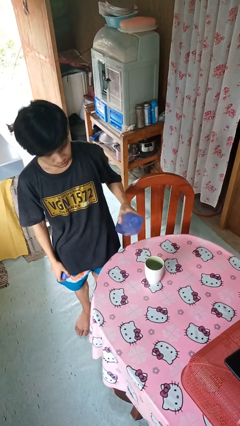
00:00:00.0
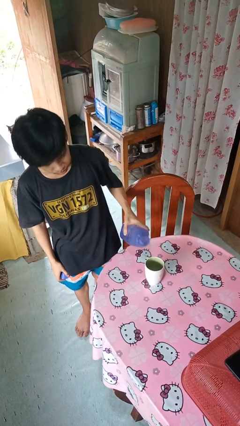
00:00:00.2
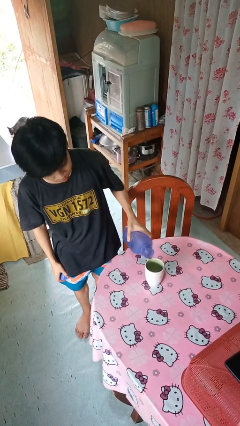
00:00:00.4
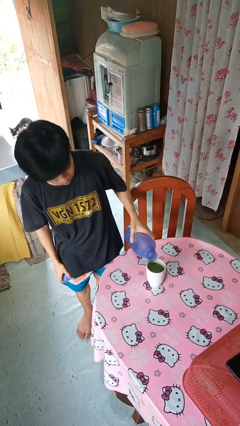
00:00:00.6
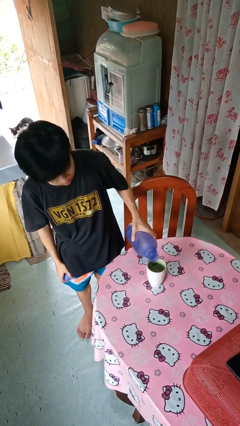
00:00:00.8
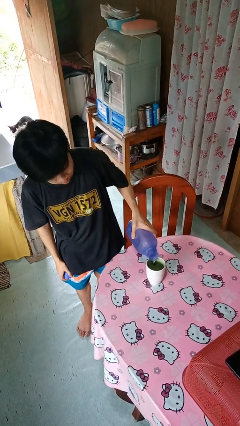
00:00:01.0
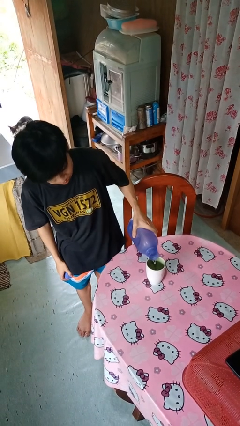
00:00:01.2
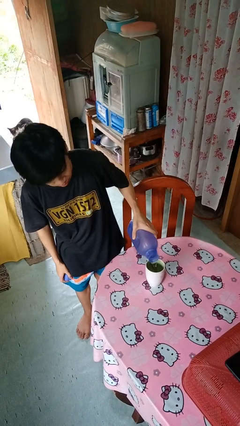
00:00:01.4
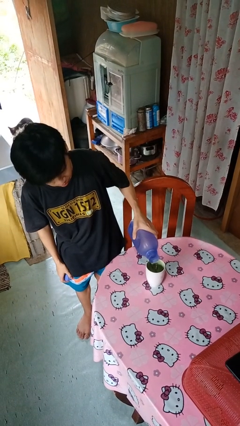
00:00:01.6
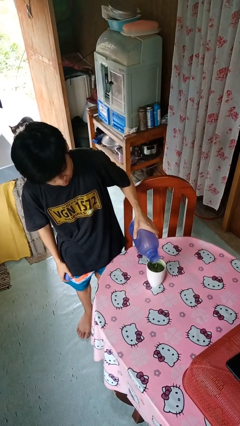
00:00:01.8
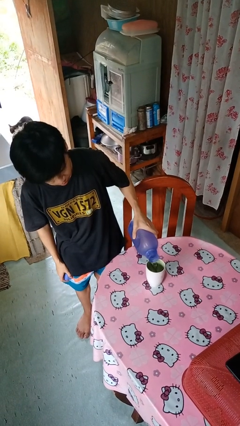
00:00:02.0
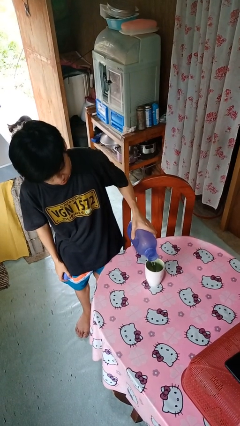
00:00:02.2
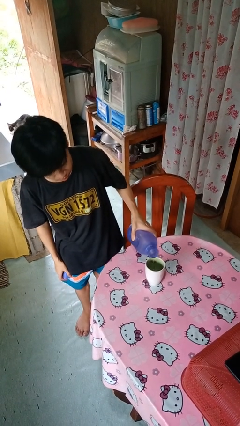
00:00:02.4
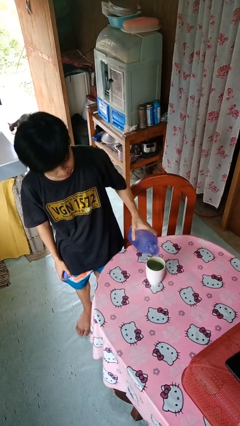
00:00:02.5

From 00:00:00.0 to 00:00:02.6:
person pours liquid into cup

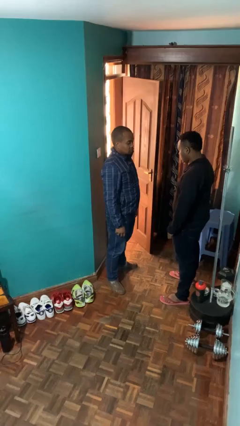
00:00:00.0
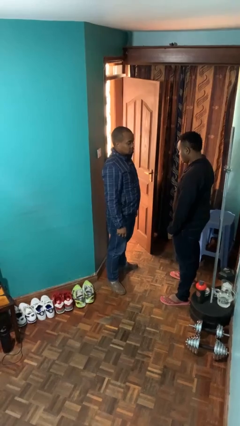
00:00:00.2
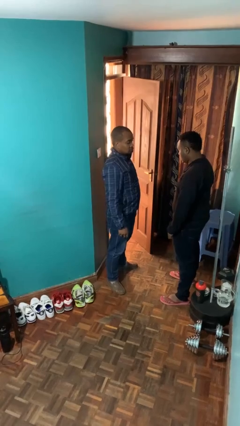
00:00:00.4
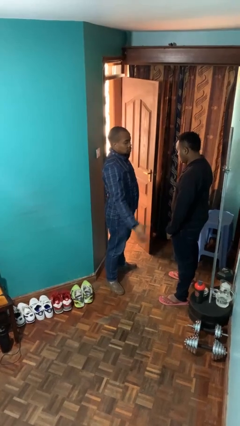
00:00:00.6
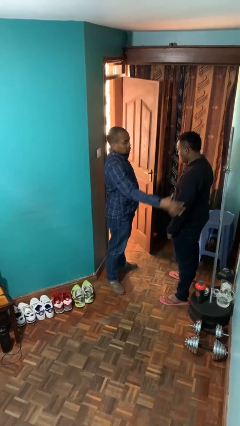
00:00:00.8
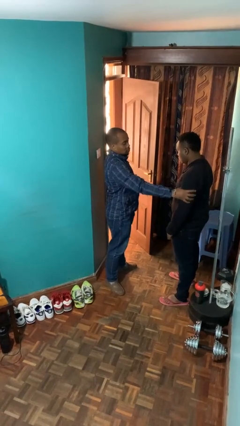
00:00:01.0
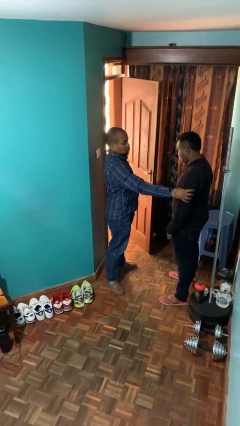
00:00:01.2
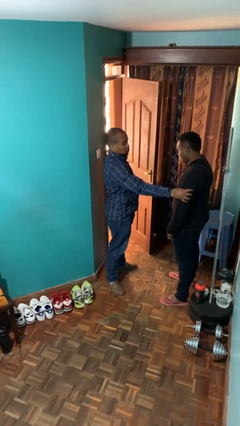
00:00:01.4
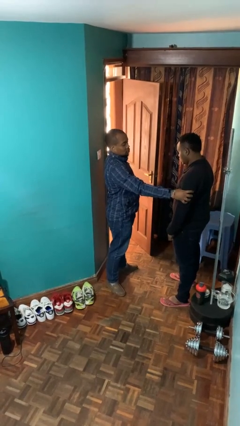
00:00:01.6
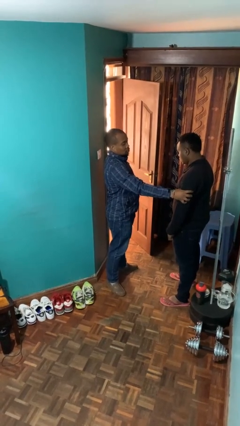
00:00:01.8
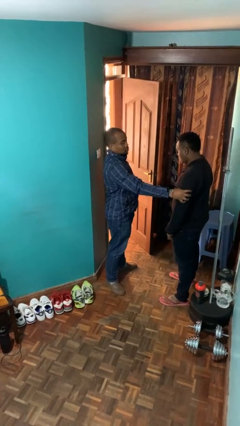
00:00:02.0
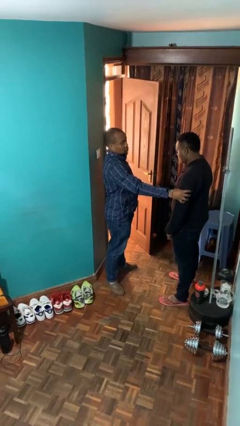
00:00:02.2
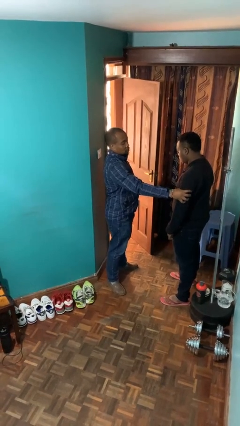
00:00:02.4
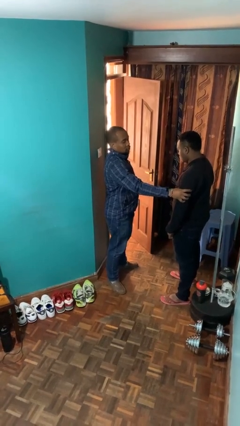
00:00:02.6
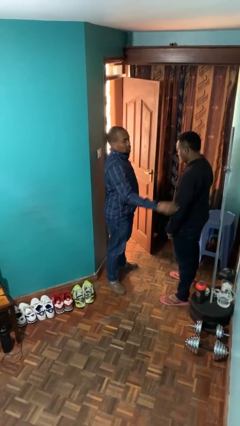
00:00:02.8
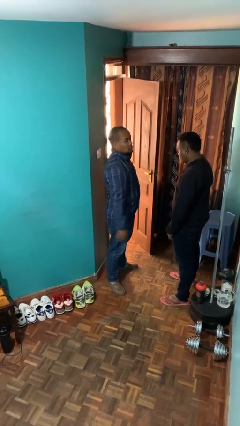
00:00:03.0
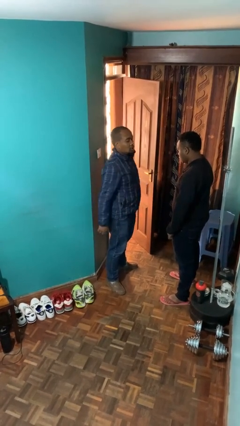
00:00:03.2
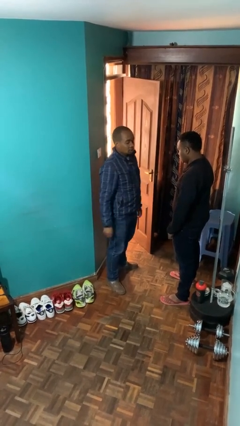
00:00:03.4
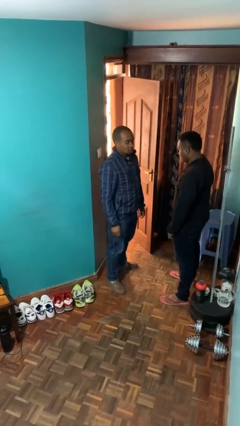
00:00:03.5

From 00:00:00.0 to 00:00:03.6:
person grabs person by bicep

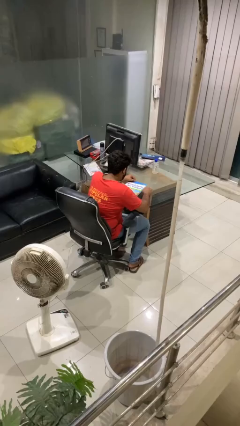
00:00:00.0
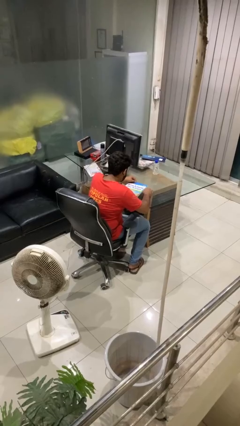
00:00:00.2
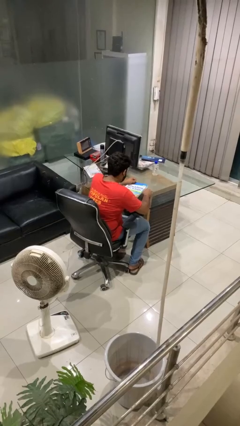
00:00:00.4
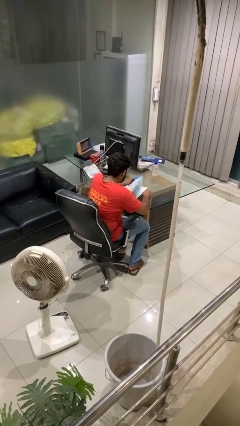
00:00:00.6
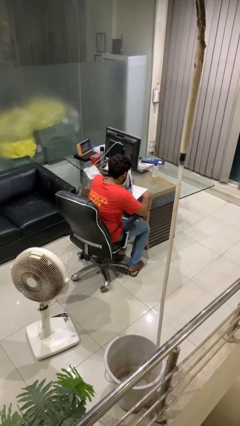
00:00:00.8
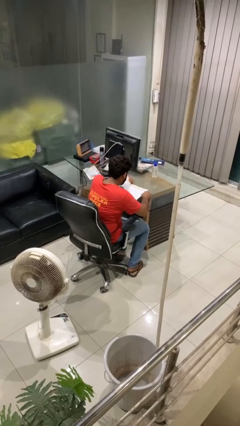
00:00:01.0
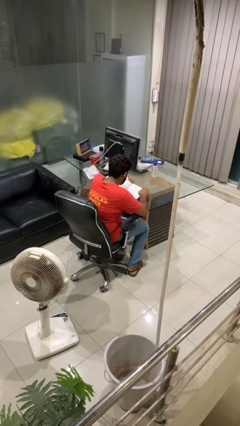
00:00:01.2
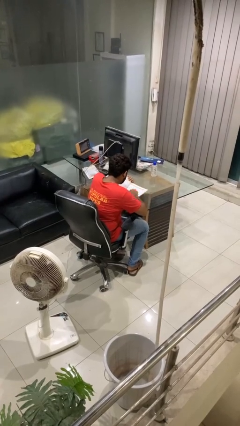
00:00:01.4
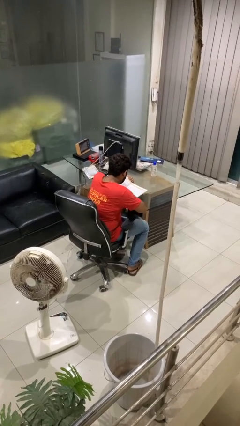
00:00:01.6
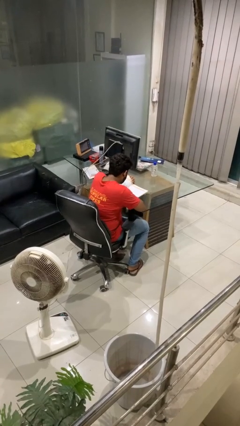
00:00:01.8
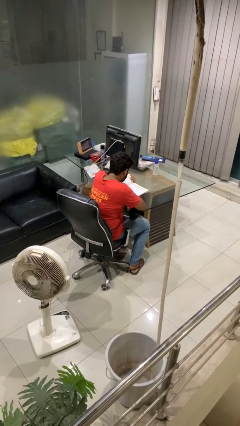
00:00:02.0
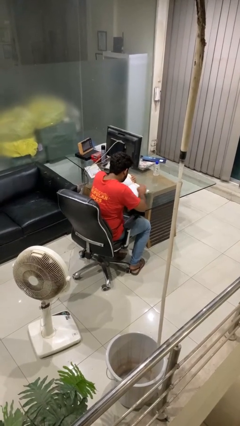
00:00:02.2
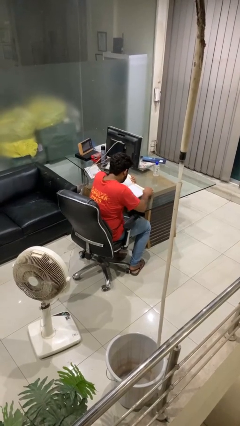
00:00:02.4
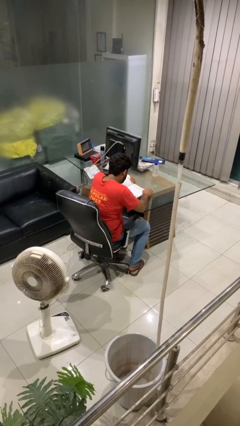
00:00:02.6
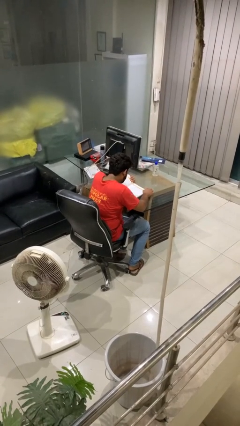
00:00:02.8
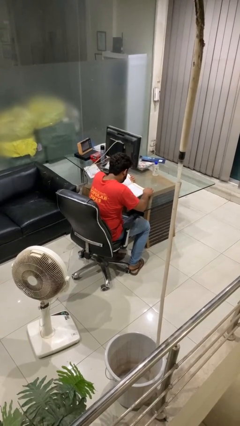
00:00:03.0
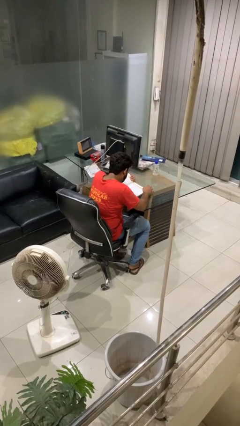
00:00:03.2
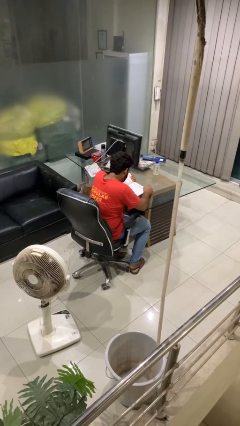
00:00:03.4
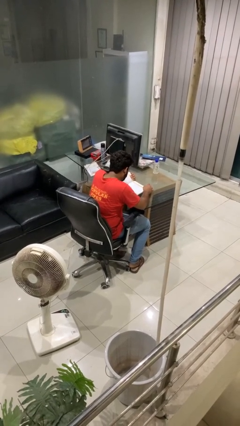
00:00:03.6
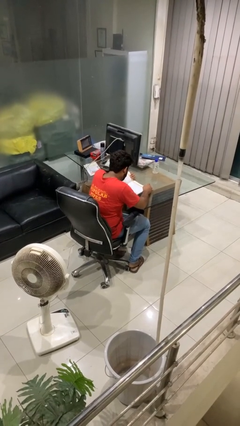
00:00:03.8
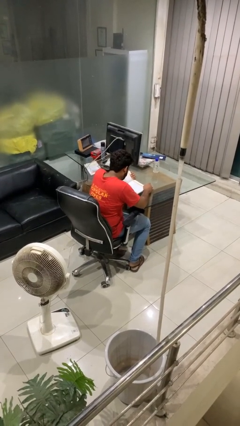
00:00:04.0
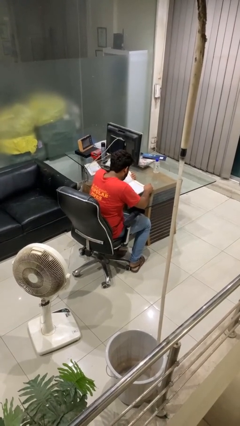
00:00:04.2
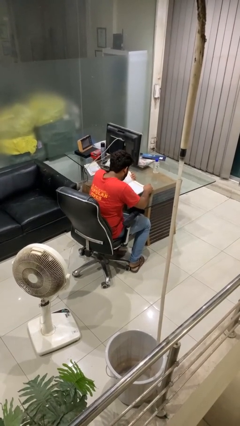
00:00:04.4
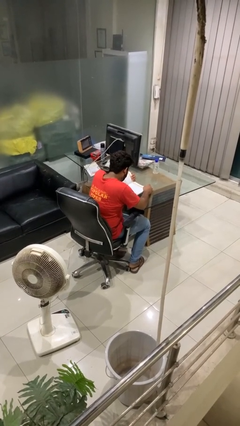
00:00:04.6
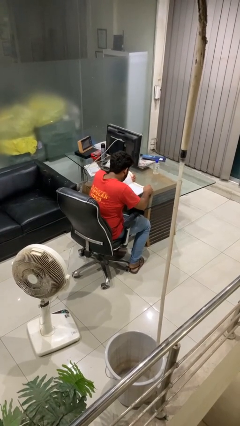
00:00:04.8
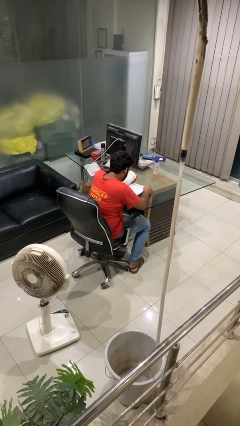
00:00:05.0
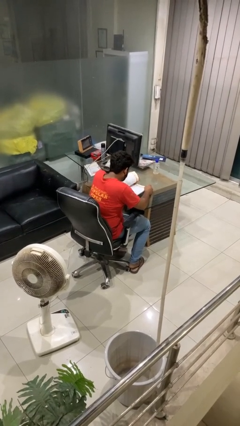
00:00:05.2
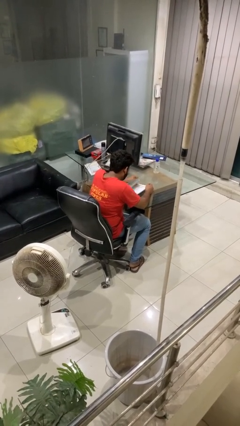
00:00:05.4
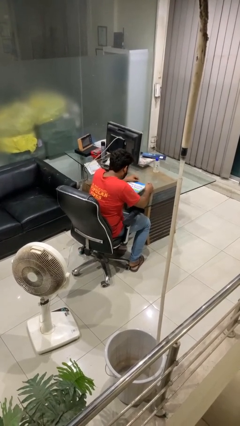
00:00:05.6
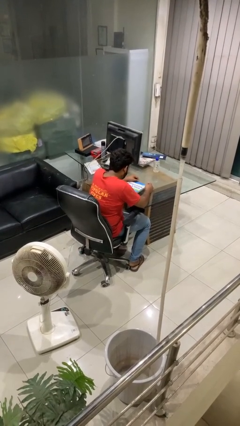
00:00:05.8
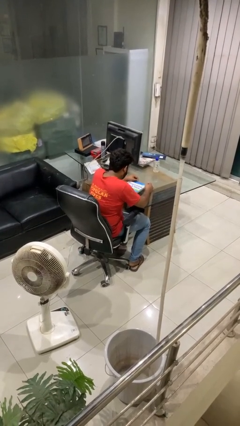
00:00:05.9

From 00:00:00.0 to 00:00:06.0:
person reads book

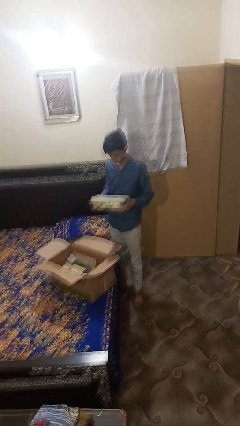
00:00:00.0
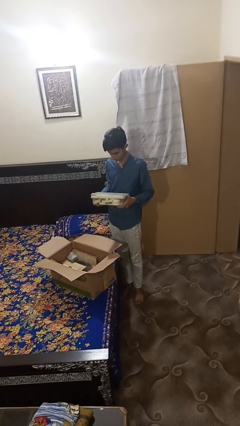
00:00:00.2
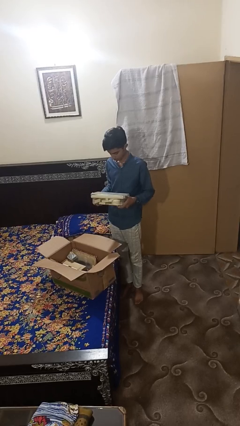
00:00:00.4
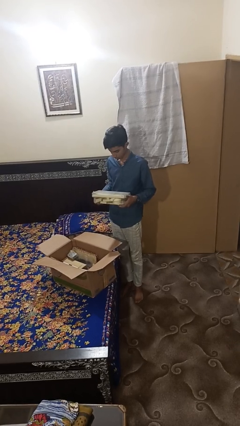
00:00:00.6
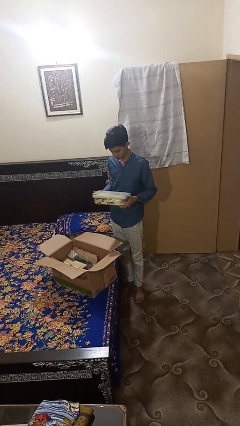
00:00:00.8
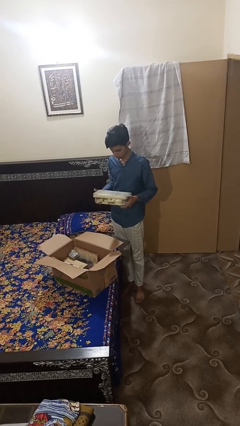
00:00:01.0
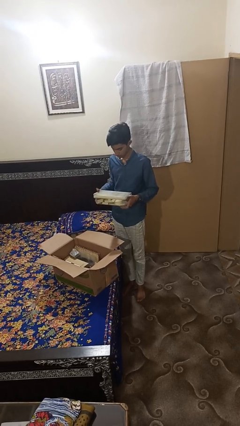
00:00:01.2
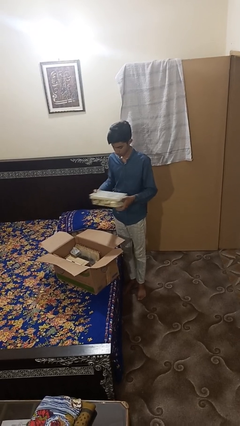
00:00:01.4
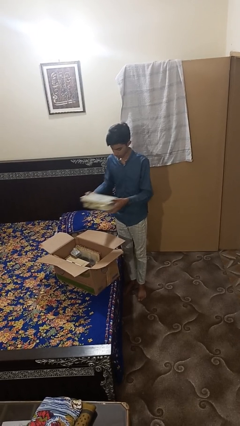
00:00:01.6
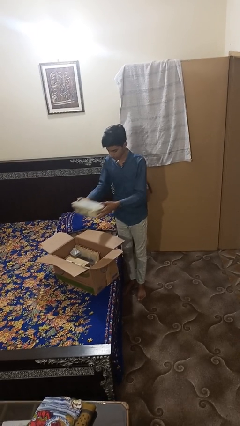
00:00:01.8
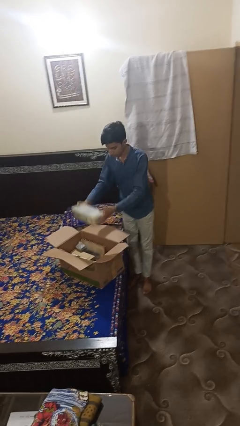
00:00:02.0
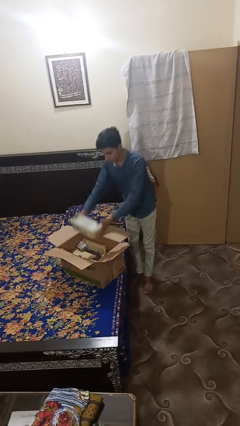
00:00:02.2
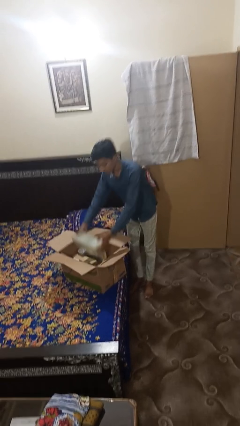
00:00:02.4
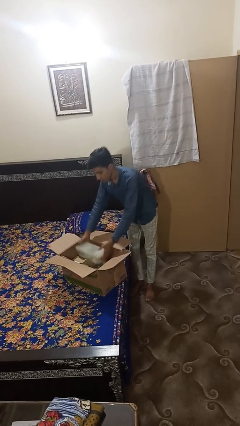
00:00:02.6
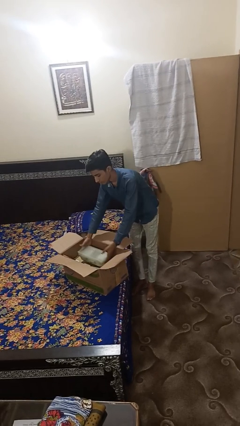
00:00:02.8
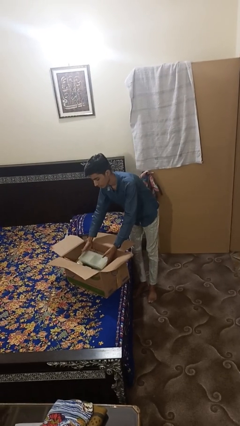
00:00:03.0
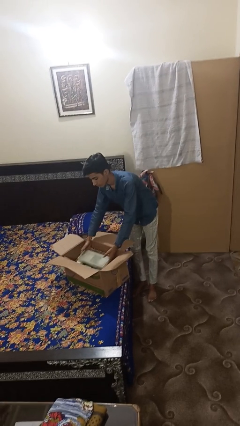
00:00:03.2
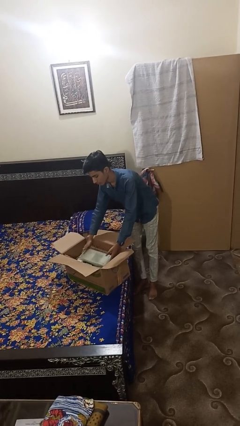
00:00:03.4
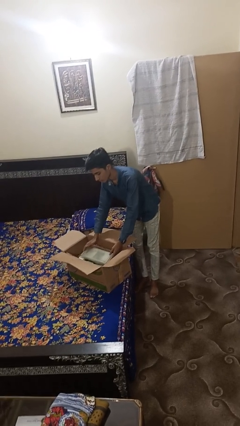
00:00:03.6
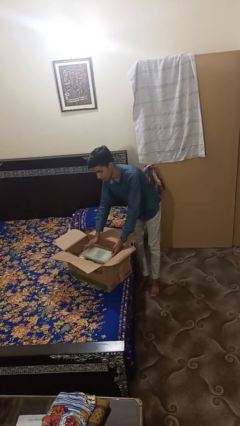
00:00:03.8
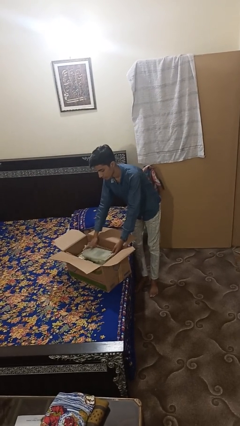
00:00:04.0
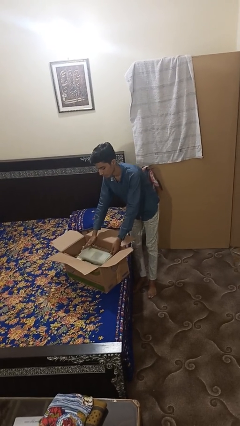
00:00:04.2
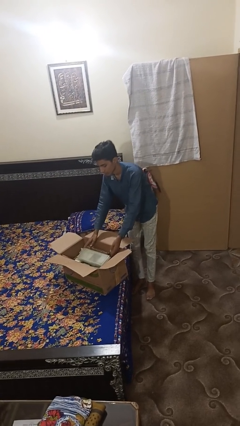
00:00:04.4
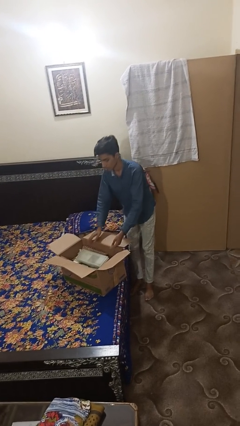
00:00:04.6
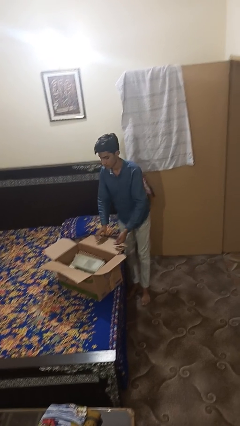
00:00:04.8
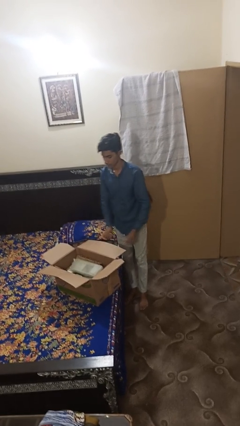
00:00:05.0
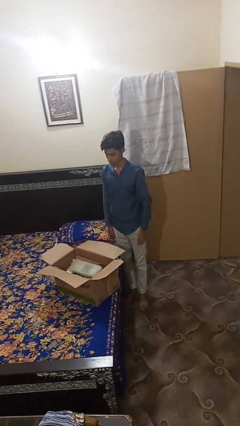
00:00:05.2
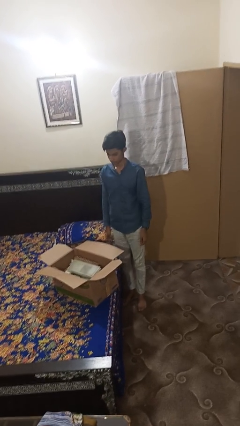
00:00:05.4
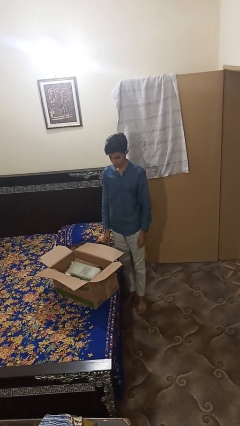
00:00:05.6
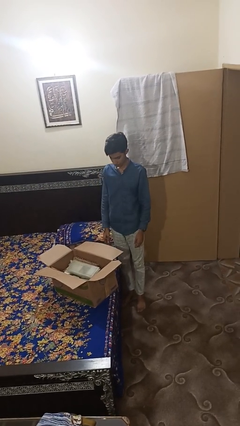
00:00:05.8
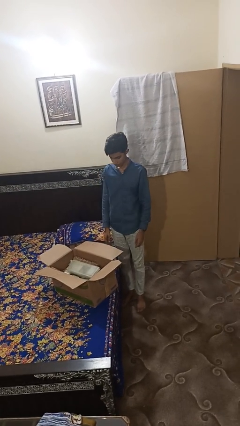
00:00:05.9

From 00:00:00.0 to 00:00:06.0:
person puts object into box
